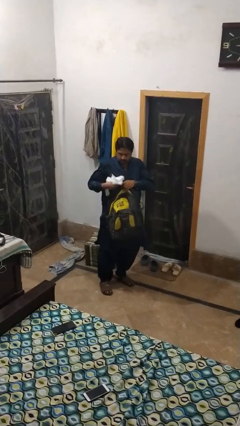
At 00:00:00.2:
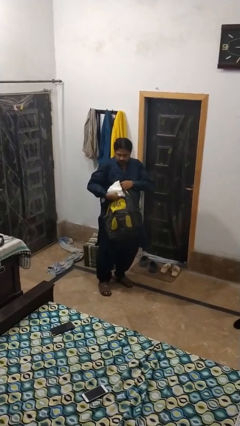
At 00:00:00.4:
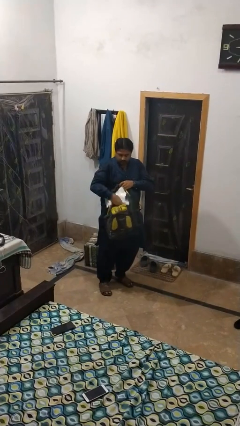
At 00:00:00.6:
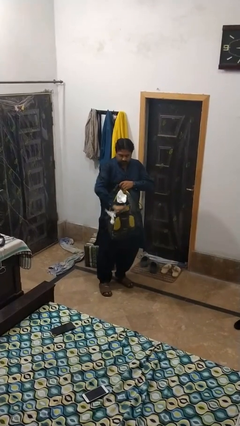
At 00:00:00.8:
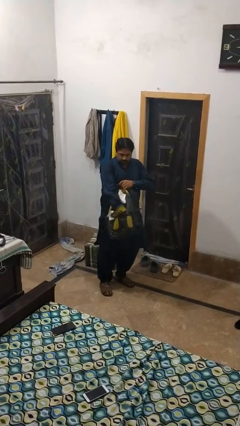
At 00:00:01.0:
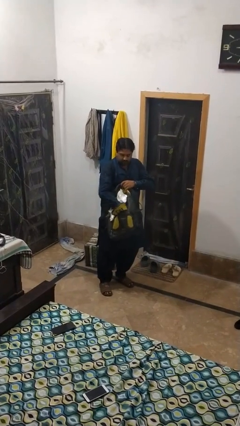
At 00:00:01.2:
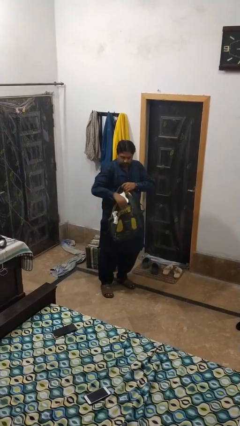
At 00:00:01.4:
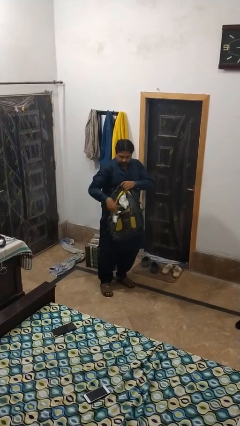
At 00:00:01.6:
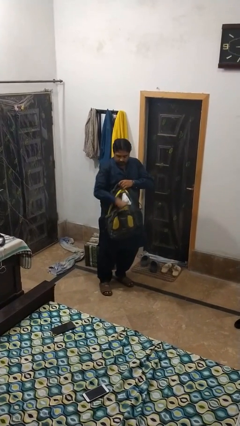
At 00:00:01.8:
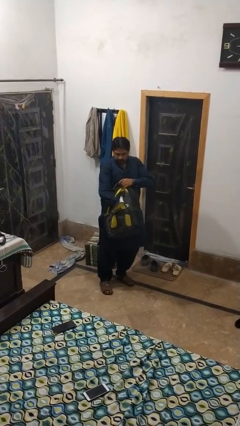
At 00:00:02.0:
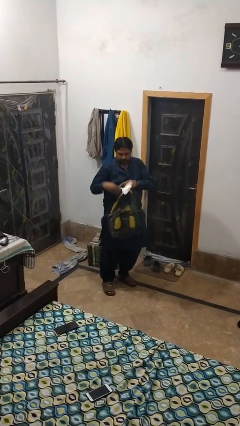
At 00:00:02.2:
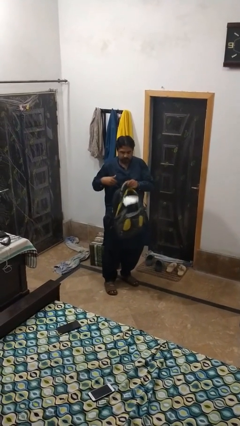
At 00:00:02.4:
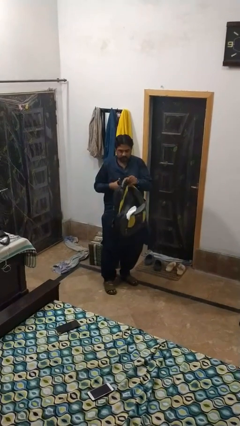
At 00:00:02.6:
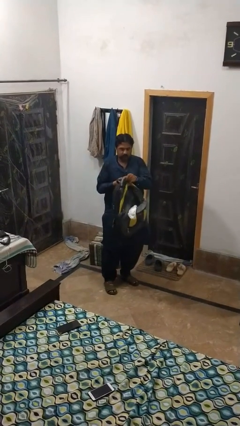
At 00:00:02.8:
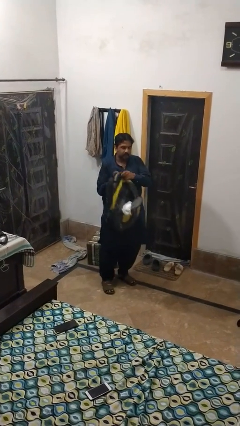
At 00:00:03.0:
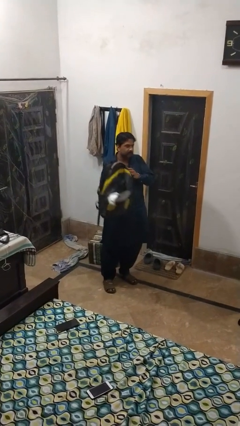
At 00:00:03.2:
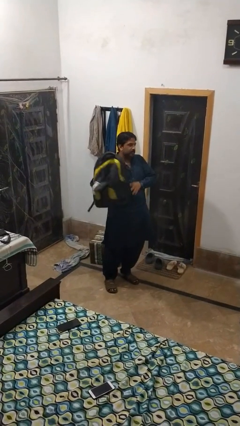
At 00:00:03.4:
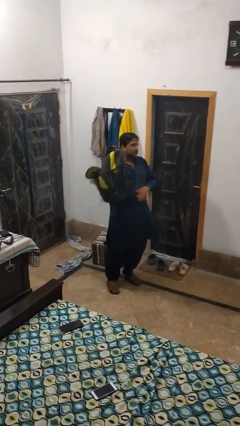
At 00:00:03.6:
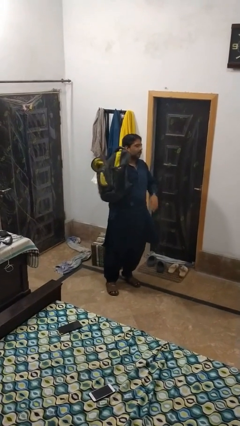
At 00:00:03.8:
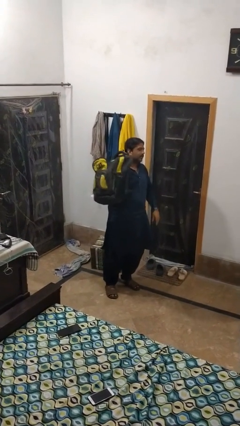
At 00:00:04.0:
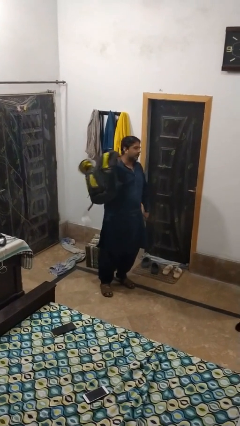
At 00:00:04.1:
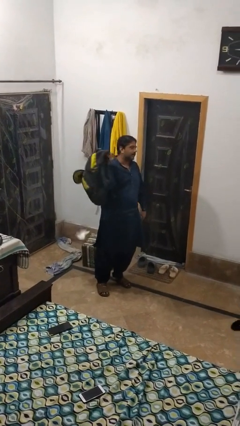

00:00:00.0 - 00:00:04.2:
person puts object into backpack

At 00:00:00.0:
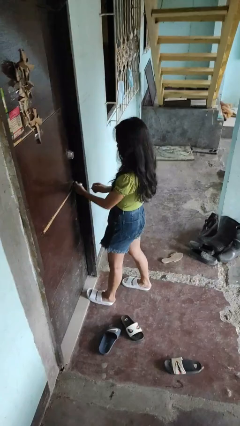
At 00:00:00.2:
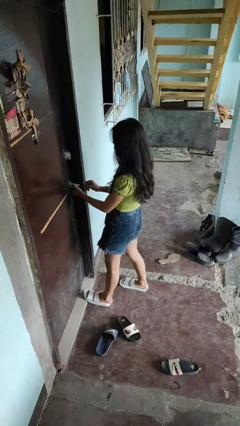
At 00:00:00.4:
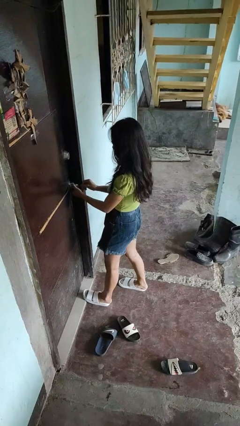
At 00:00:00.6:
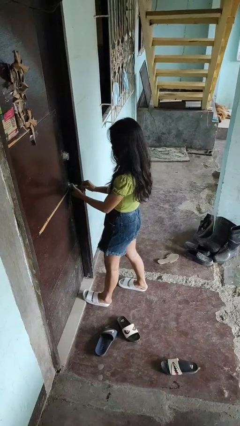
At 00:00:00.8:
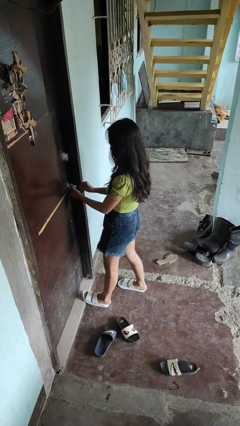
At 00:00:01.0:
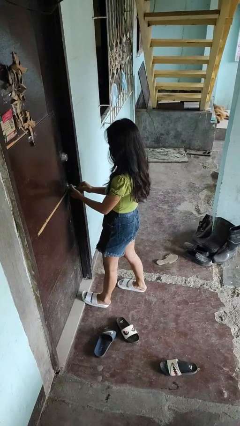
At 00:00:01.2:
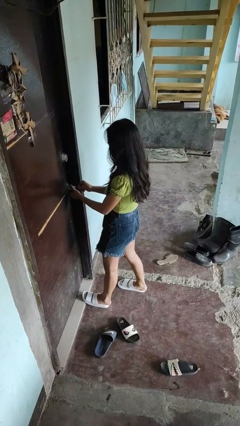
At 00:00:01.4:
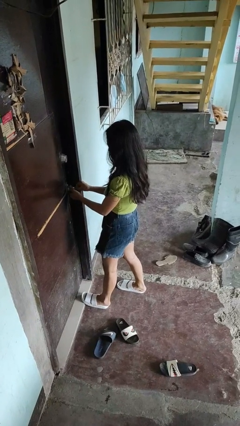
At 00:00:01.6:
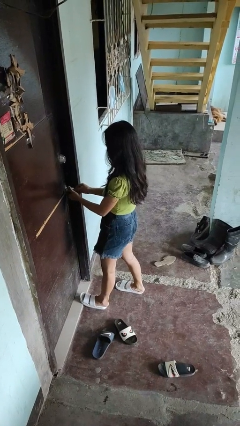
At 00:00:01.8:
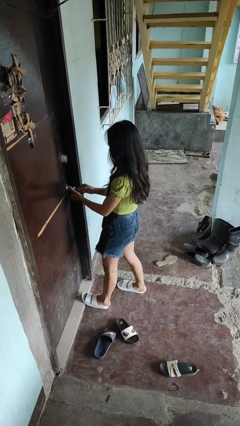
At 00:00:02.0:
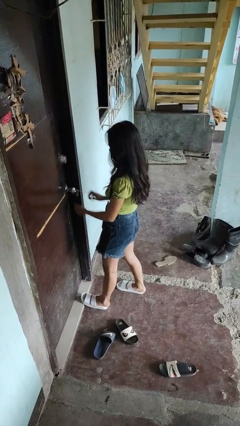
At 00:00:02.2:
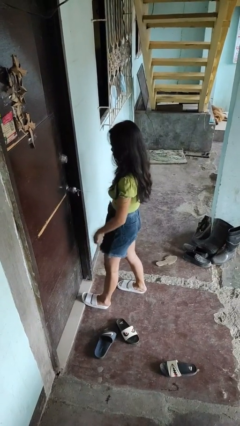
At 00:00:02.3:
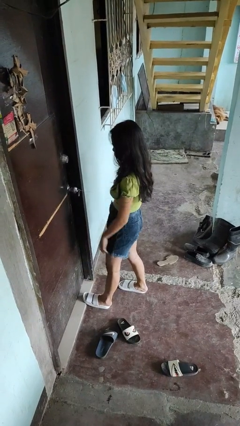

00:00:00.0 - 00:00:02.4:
person locks door with keys

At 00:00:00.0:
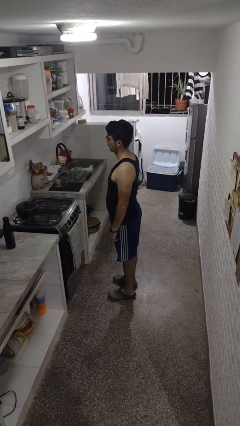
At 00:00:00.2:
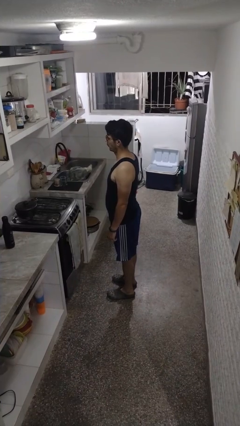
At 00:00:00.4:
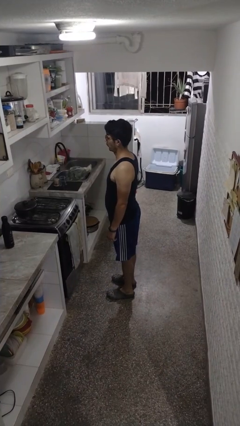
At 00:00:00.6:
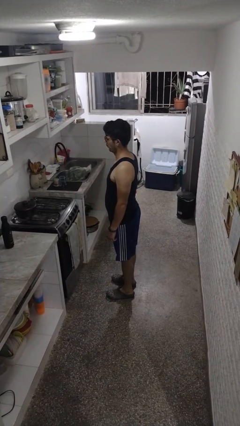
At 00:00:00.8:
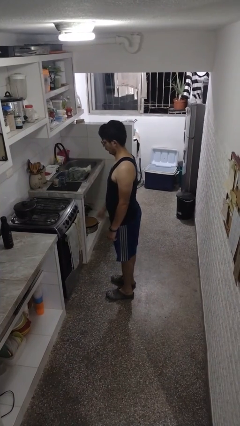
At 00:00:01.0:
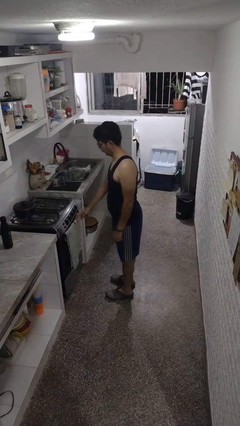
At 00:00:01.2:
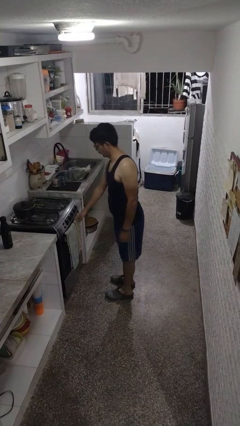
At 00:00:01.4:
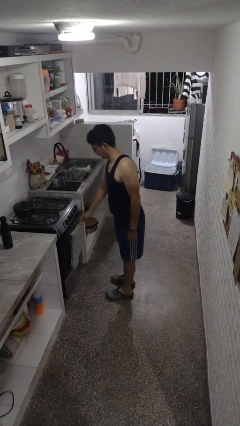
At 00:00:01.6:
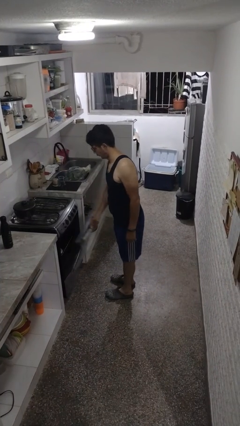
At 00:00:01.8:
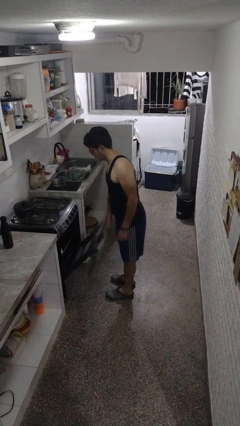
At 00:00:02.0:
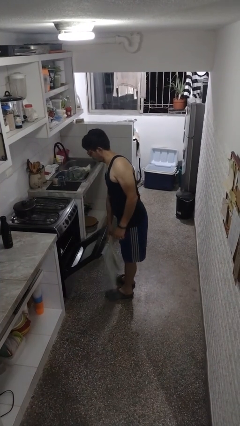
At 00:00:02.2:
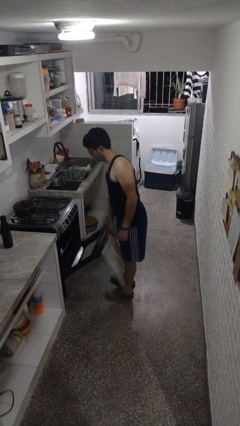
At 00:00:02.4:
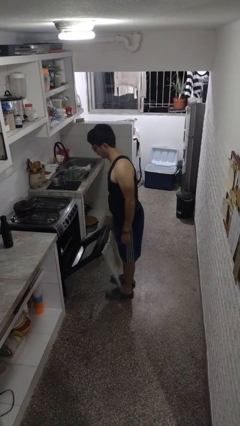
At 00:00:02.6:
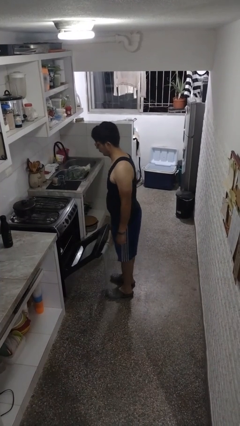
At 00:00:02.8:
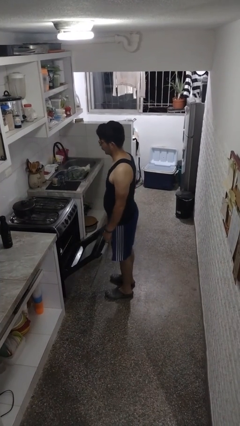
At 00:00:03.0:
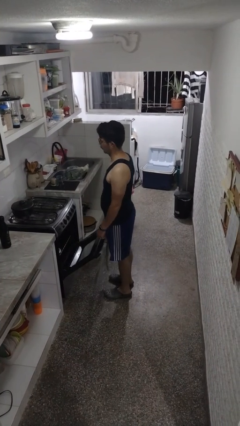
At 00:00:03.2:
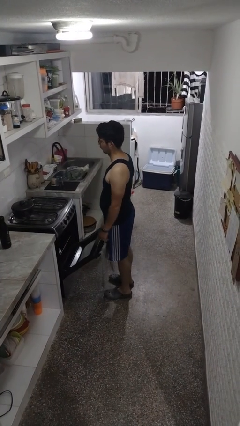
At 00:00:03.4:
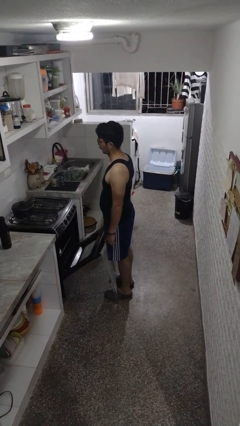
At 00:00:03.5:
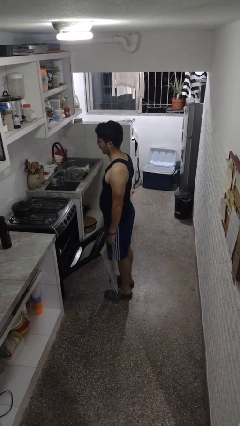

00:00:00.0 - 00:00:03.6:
person opens oven door

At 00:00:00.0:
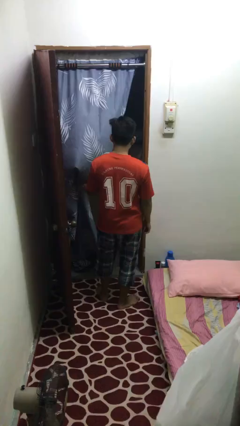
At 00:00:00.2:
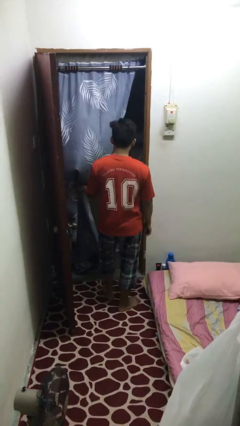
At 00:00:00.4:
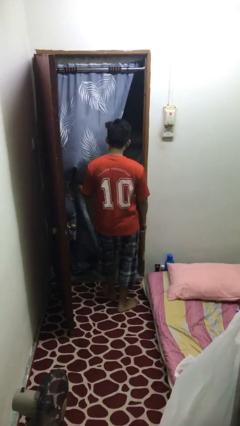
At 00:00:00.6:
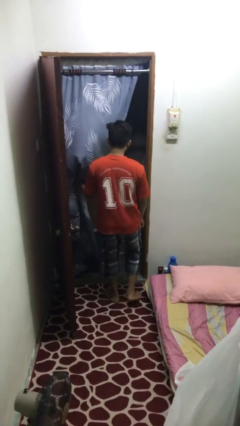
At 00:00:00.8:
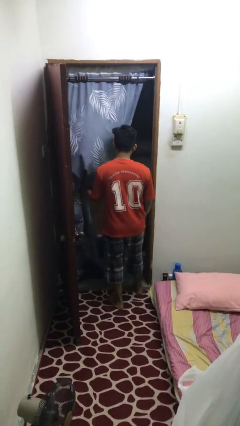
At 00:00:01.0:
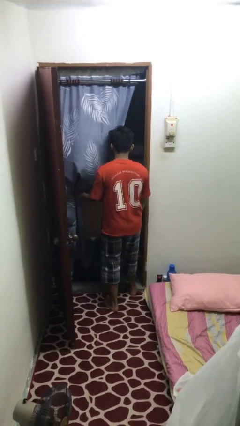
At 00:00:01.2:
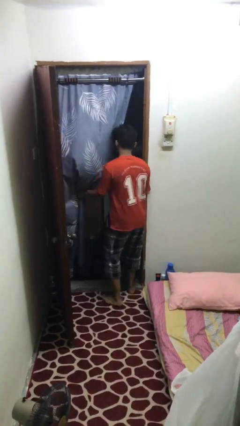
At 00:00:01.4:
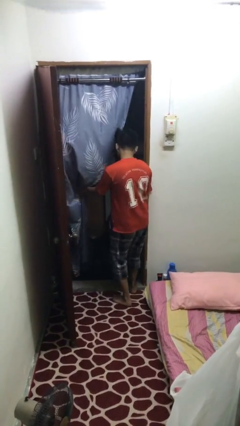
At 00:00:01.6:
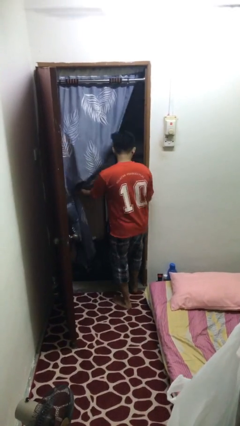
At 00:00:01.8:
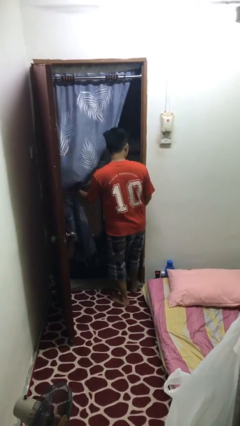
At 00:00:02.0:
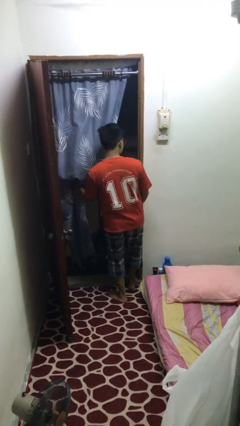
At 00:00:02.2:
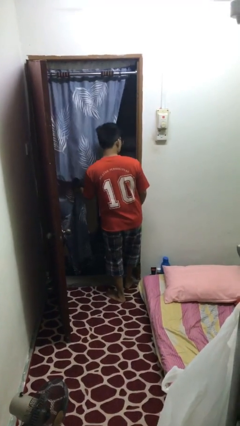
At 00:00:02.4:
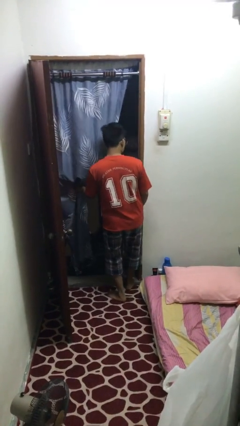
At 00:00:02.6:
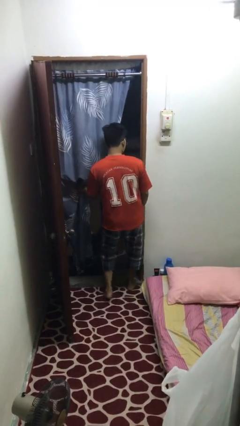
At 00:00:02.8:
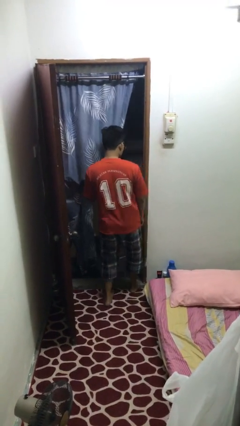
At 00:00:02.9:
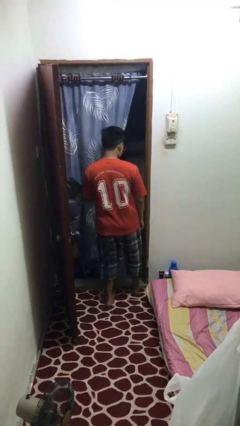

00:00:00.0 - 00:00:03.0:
person bumps into wall

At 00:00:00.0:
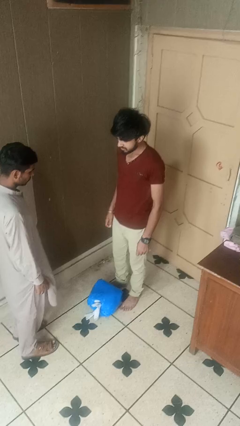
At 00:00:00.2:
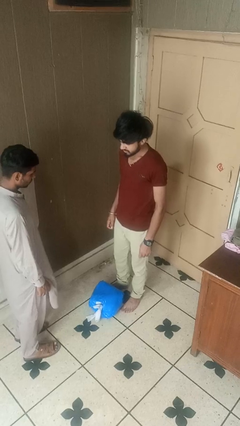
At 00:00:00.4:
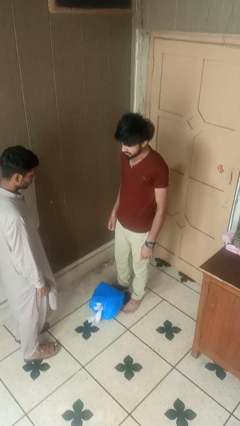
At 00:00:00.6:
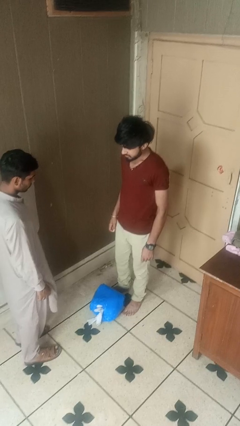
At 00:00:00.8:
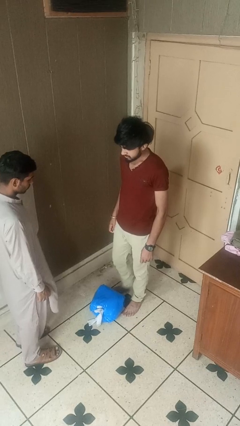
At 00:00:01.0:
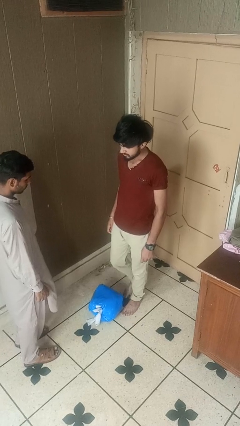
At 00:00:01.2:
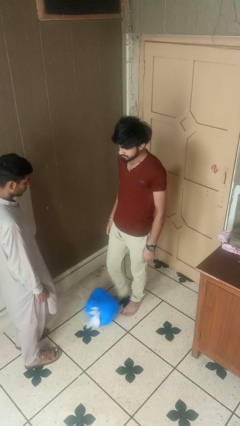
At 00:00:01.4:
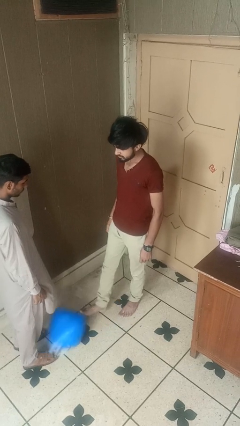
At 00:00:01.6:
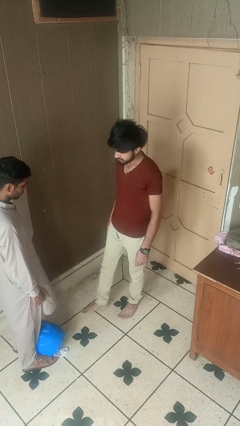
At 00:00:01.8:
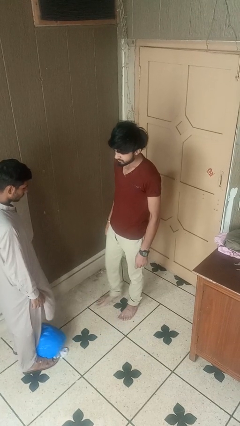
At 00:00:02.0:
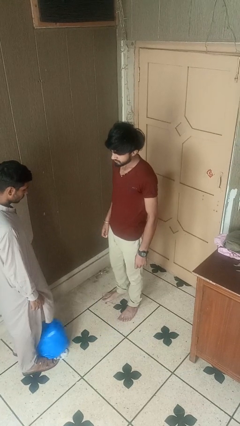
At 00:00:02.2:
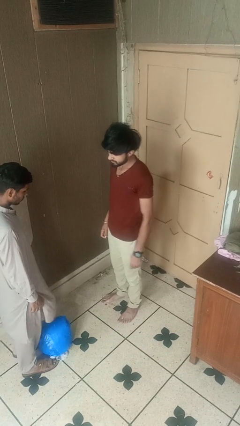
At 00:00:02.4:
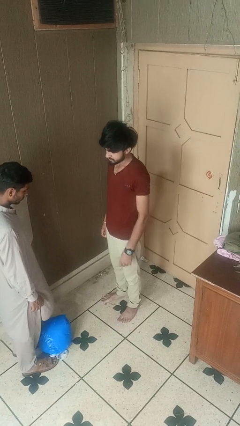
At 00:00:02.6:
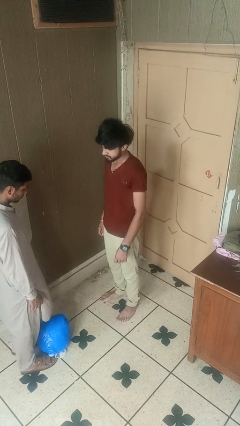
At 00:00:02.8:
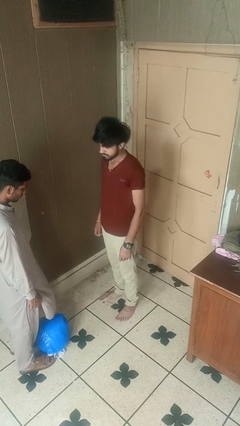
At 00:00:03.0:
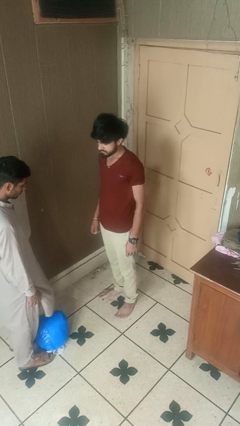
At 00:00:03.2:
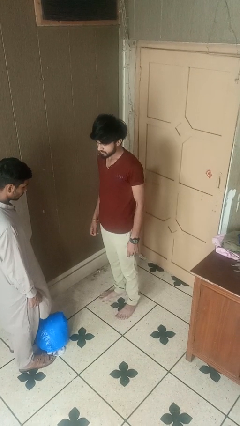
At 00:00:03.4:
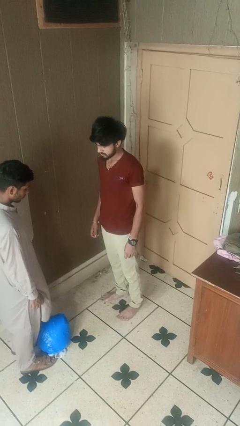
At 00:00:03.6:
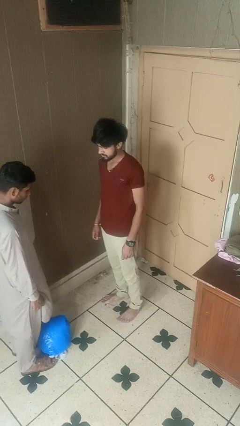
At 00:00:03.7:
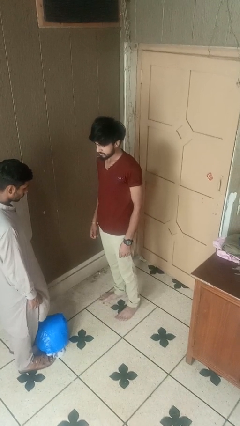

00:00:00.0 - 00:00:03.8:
person kicks object to person

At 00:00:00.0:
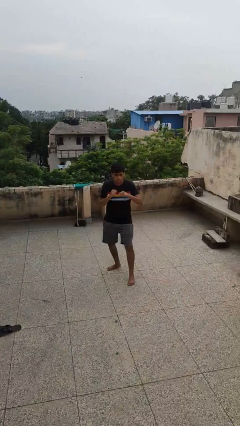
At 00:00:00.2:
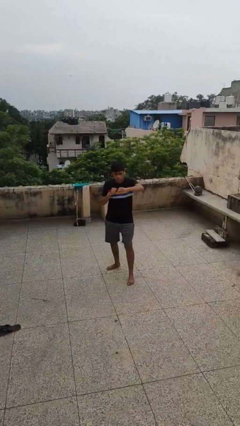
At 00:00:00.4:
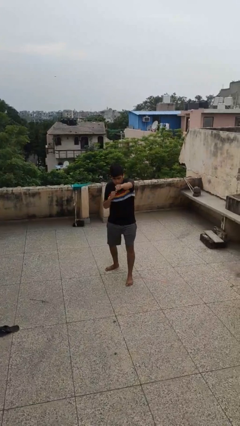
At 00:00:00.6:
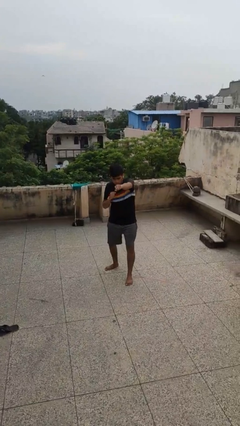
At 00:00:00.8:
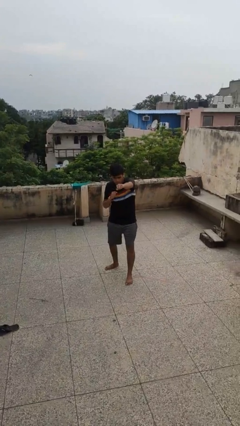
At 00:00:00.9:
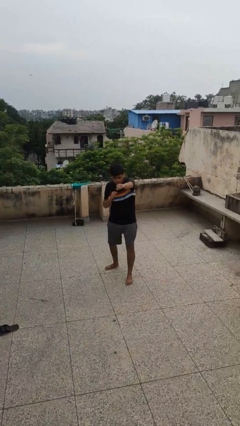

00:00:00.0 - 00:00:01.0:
person punches
